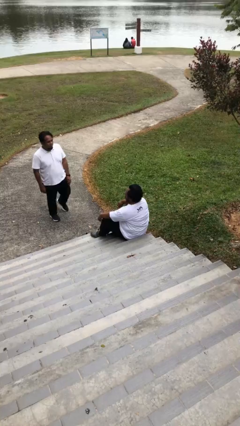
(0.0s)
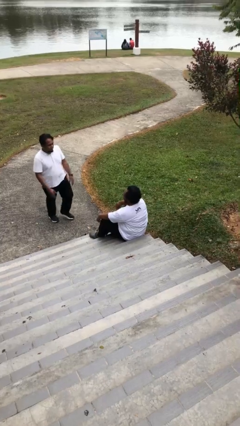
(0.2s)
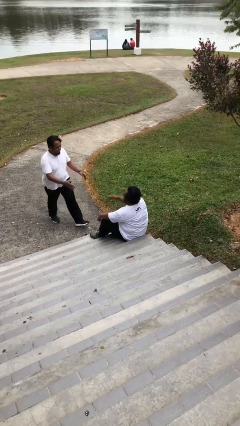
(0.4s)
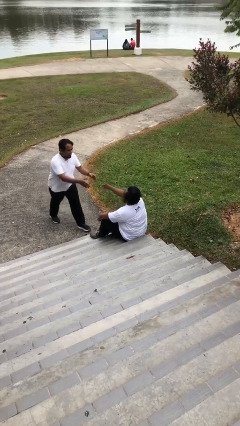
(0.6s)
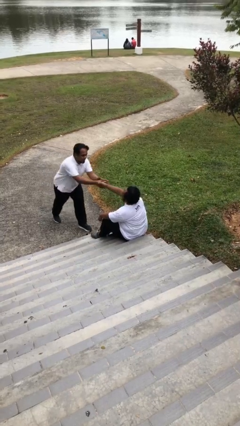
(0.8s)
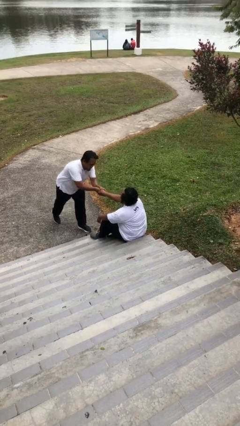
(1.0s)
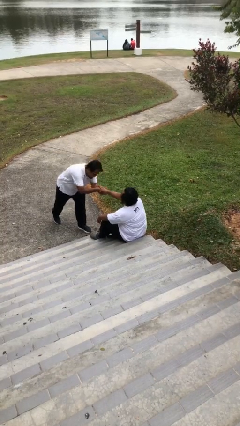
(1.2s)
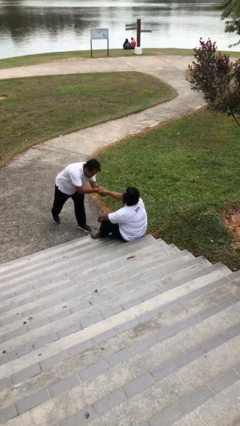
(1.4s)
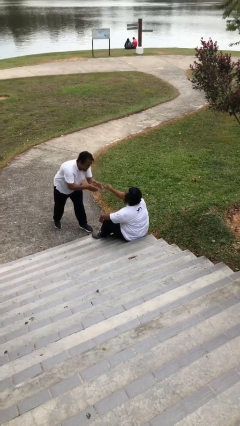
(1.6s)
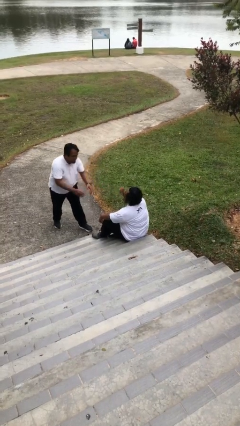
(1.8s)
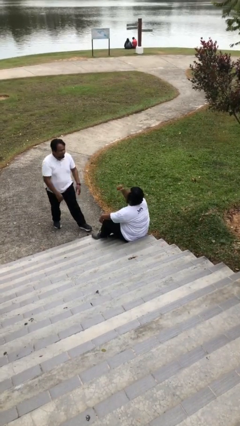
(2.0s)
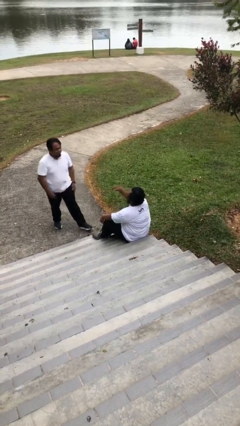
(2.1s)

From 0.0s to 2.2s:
person shakes hand

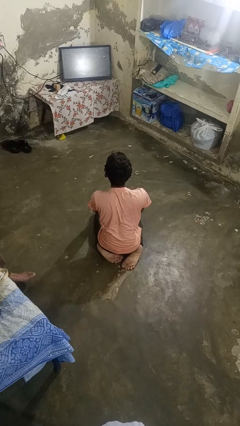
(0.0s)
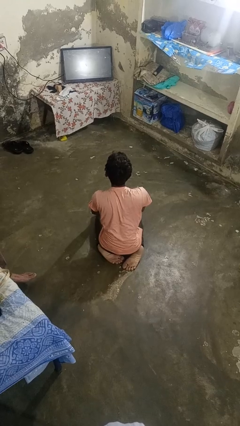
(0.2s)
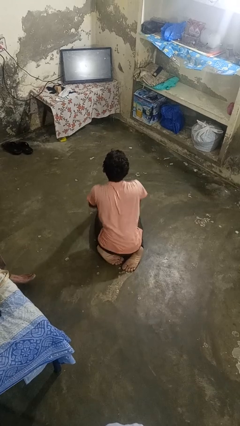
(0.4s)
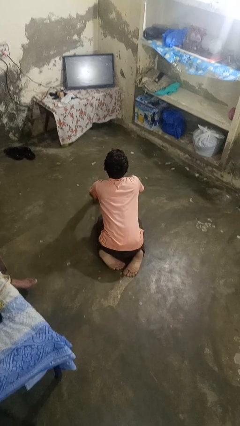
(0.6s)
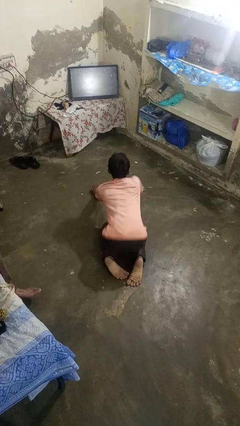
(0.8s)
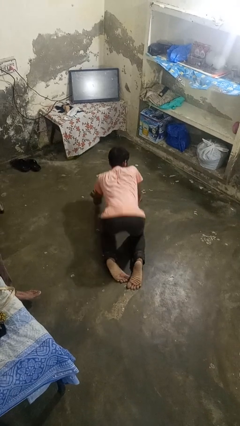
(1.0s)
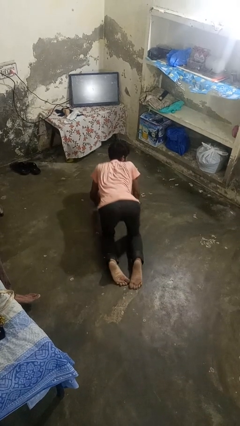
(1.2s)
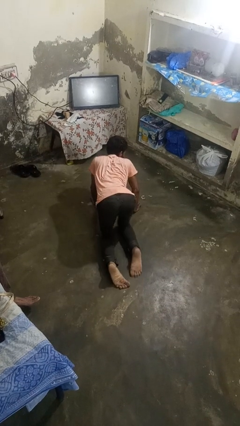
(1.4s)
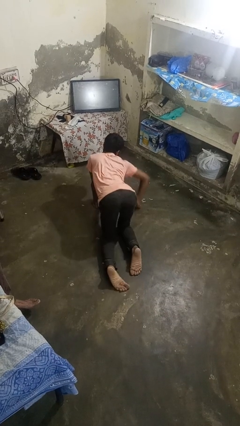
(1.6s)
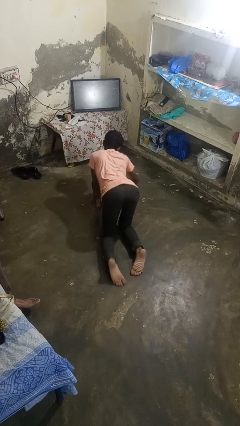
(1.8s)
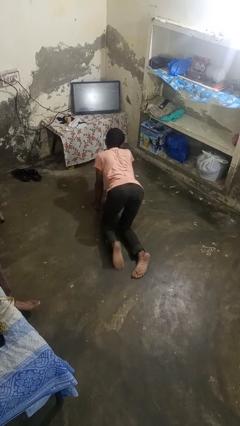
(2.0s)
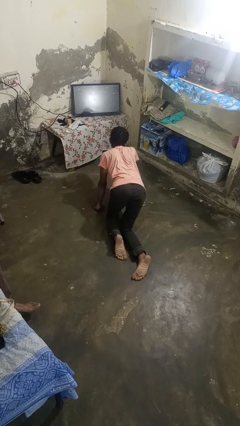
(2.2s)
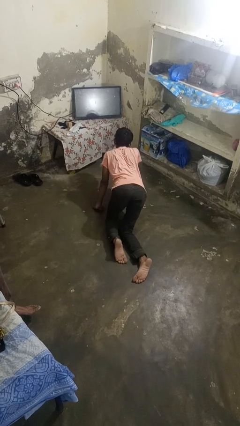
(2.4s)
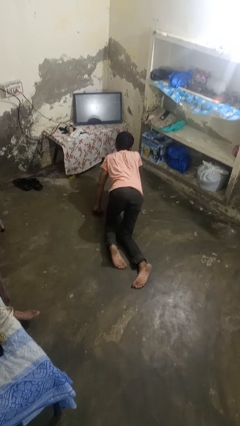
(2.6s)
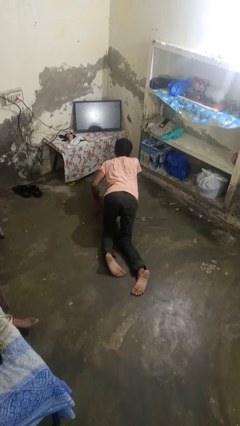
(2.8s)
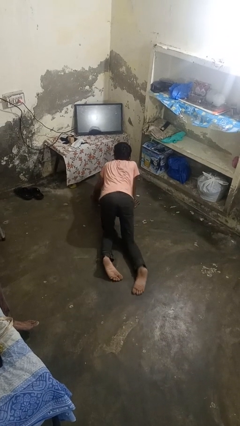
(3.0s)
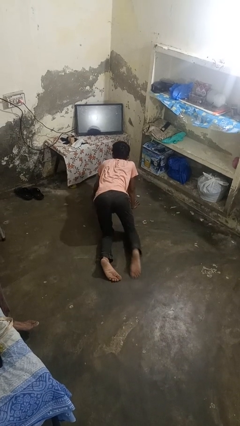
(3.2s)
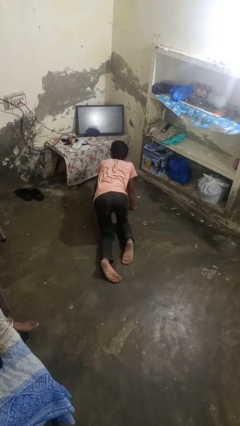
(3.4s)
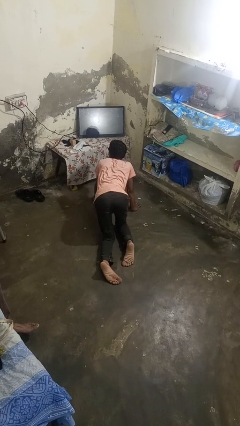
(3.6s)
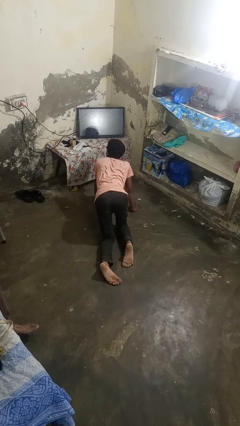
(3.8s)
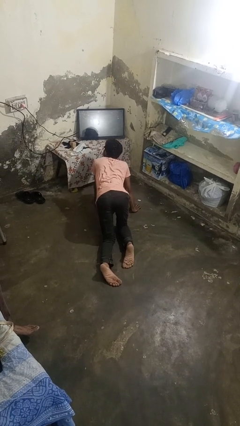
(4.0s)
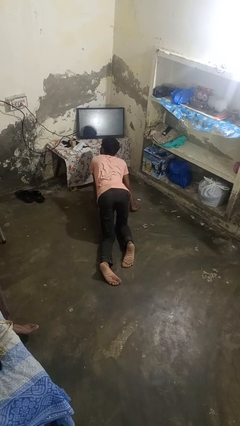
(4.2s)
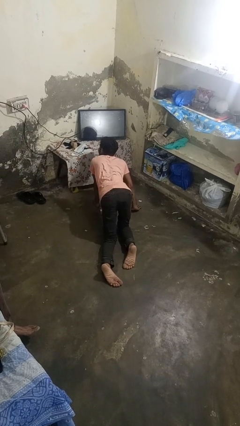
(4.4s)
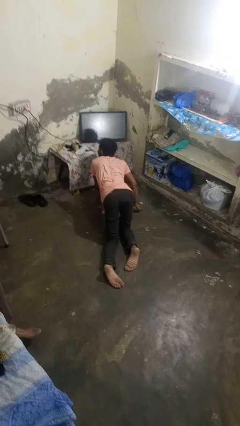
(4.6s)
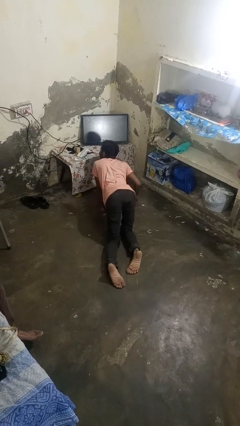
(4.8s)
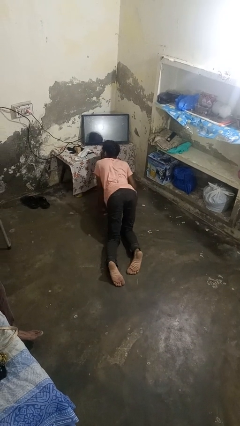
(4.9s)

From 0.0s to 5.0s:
person crawls

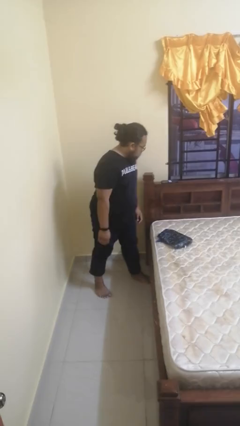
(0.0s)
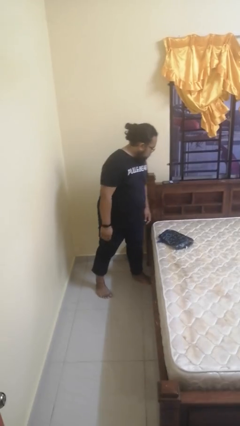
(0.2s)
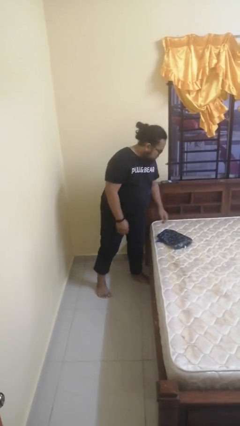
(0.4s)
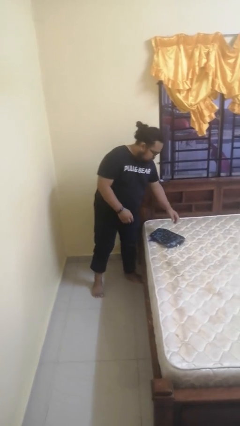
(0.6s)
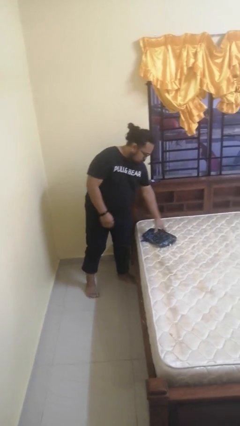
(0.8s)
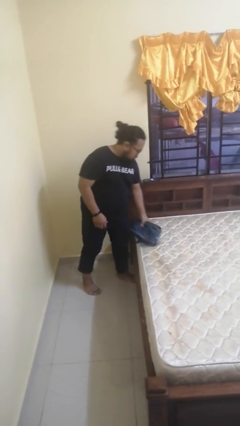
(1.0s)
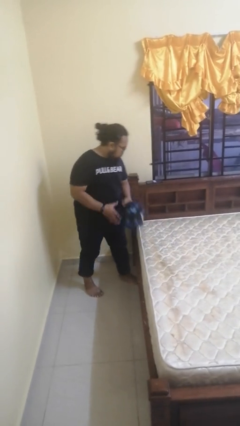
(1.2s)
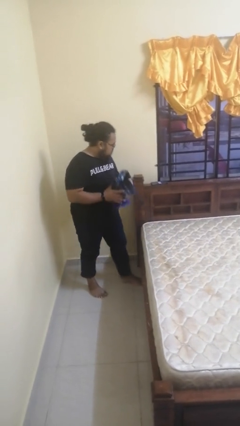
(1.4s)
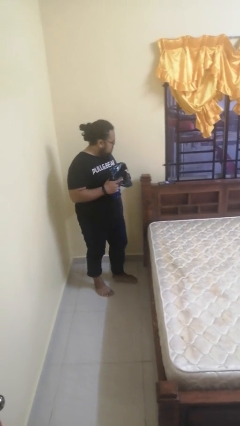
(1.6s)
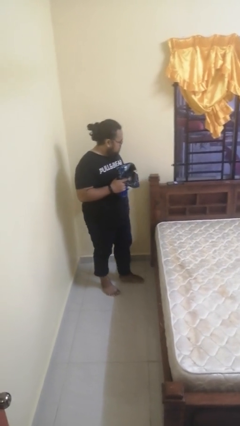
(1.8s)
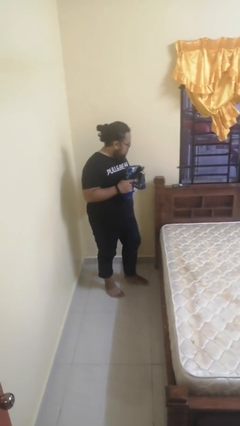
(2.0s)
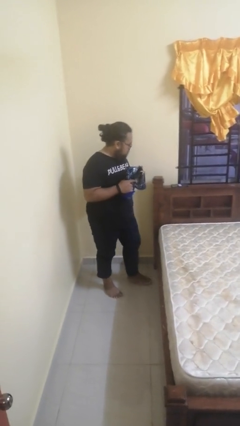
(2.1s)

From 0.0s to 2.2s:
person picks up object from bed

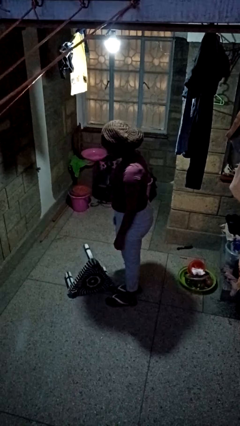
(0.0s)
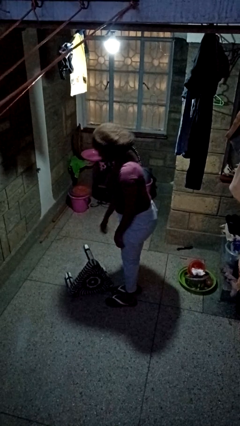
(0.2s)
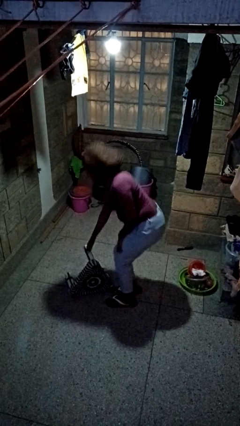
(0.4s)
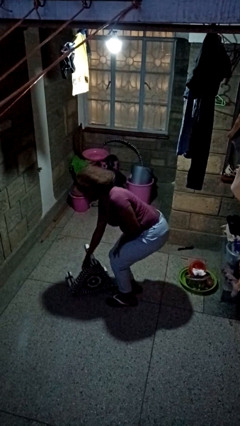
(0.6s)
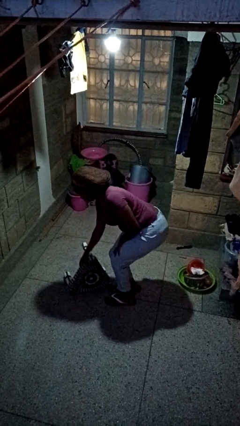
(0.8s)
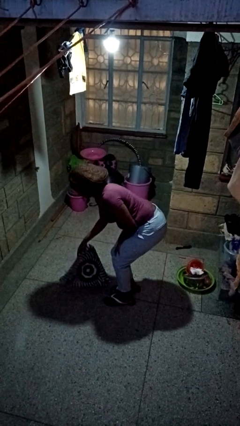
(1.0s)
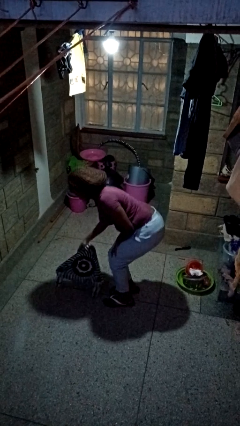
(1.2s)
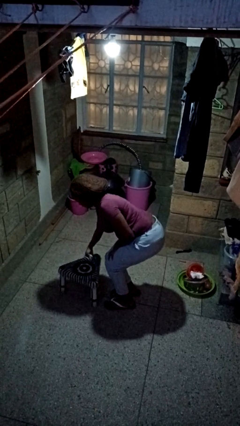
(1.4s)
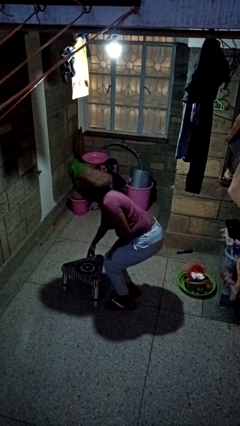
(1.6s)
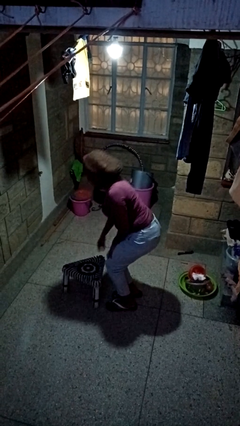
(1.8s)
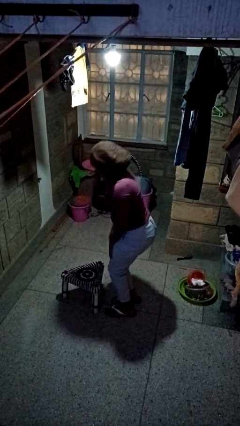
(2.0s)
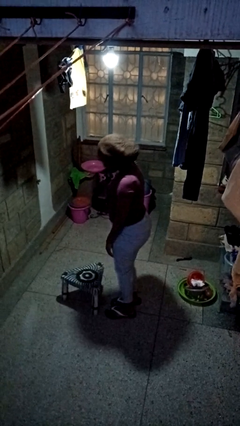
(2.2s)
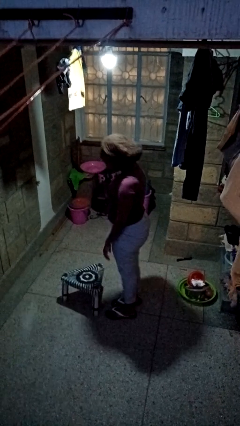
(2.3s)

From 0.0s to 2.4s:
person sets upright furniture

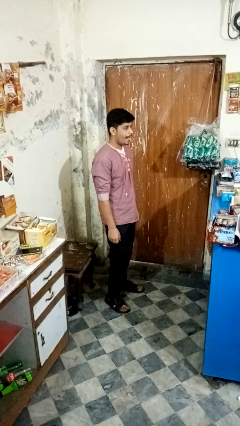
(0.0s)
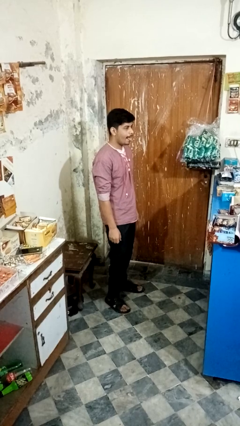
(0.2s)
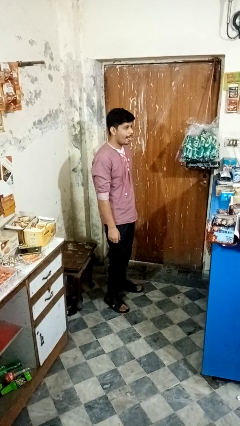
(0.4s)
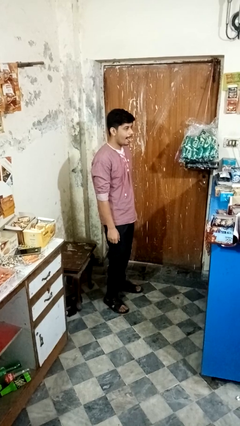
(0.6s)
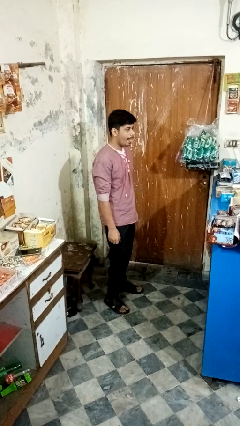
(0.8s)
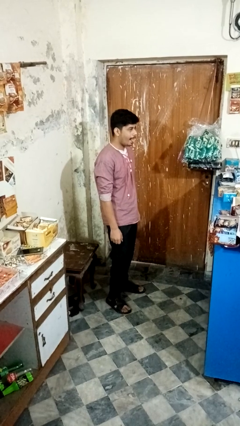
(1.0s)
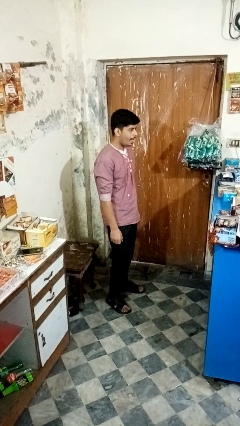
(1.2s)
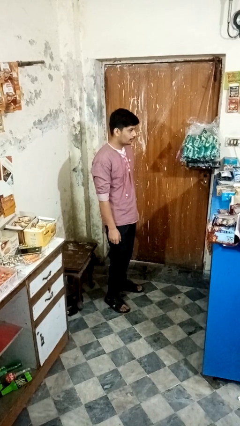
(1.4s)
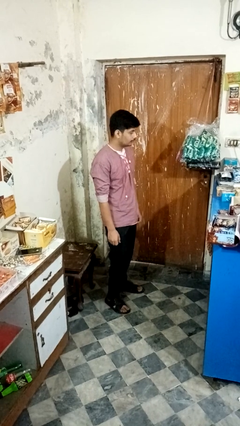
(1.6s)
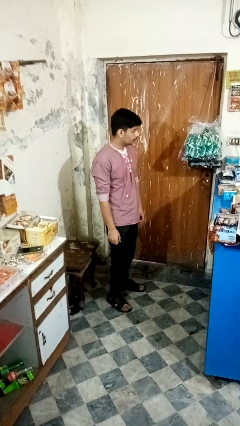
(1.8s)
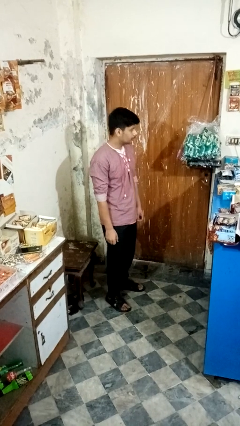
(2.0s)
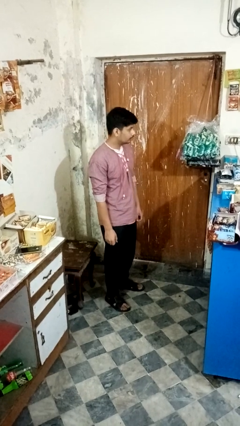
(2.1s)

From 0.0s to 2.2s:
person sticks out tongue

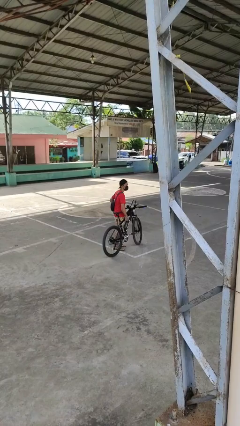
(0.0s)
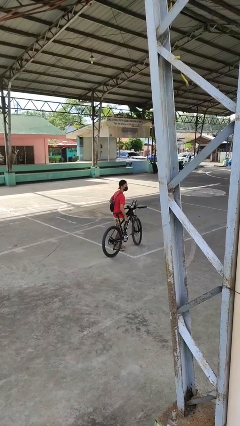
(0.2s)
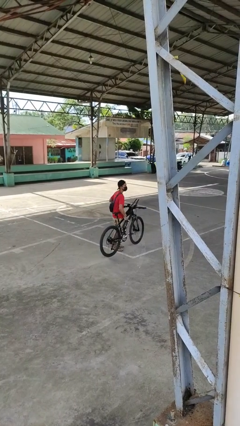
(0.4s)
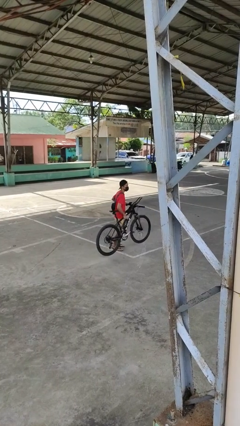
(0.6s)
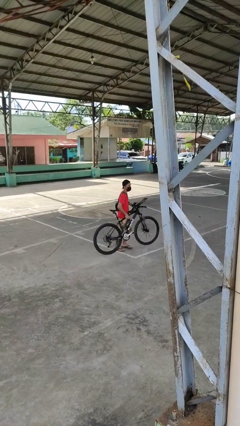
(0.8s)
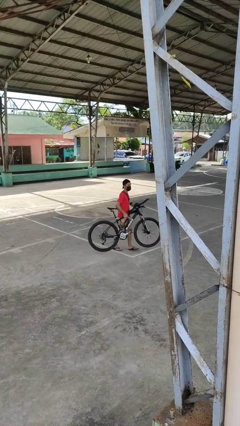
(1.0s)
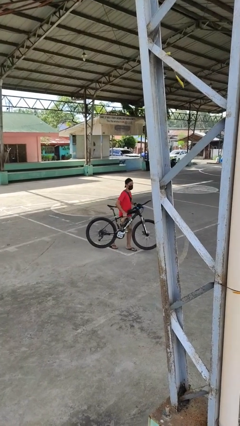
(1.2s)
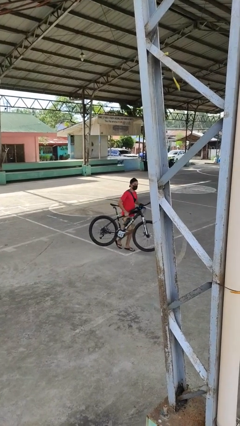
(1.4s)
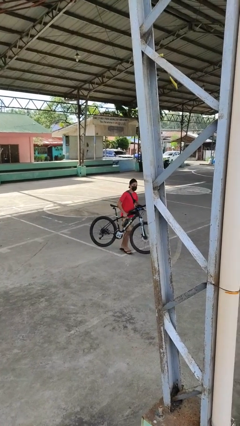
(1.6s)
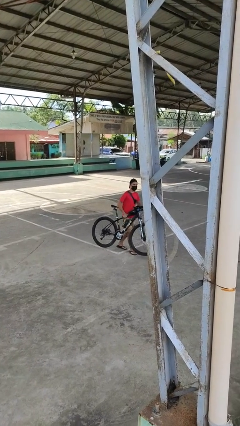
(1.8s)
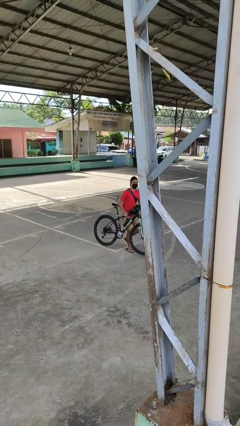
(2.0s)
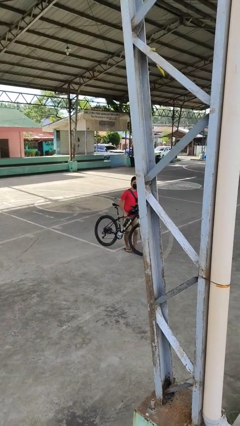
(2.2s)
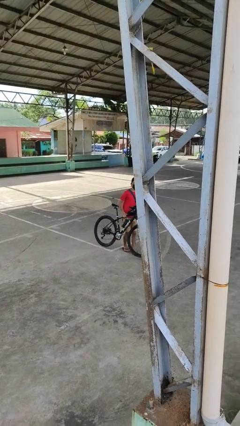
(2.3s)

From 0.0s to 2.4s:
person carries bicycle

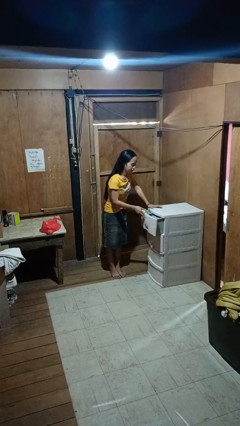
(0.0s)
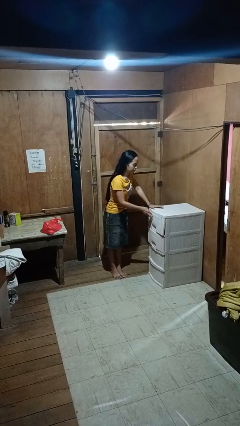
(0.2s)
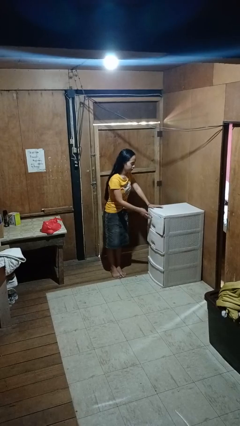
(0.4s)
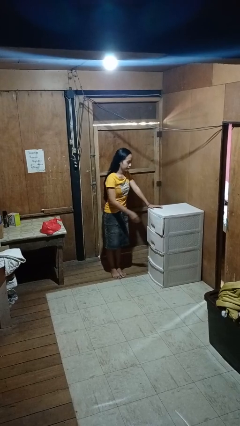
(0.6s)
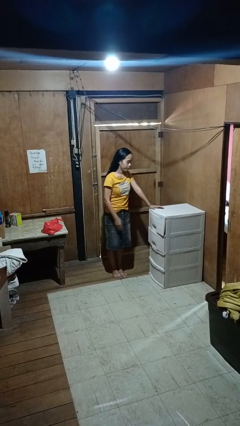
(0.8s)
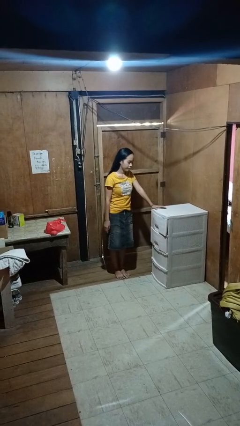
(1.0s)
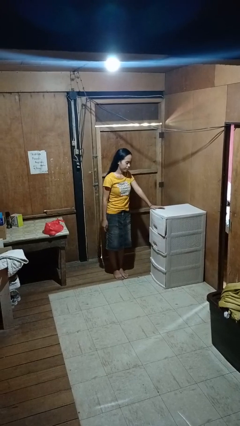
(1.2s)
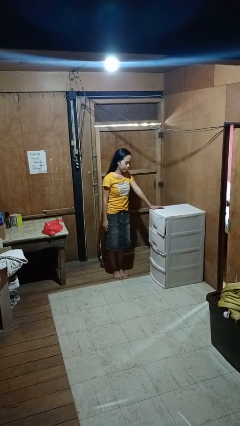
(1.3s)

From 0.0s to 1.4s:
person closes dresser drawer
